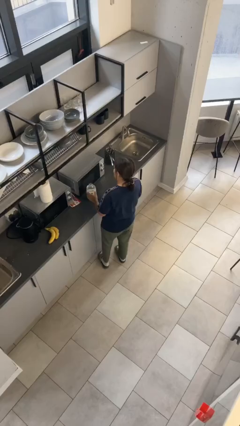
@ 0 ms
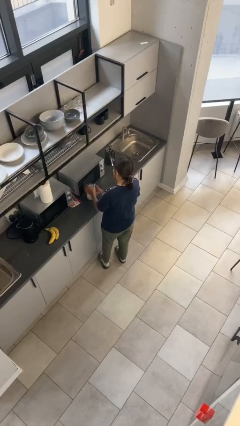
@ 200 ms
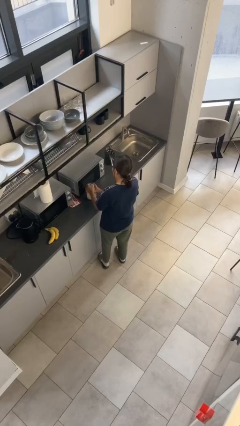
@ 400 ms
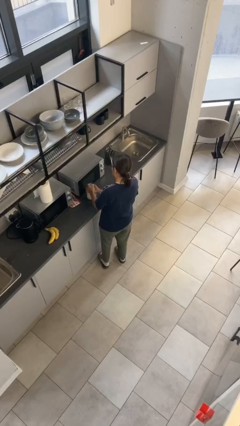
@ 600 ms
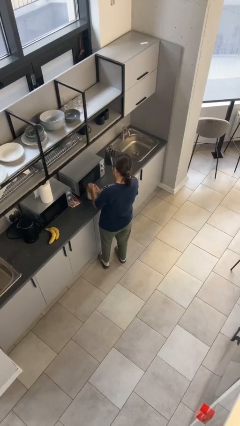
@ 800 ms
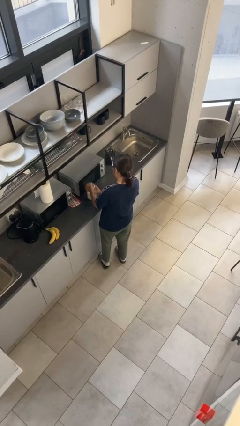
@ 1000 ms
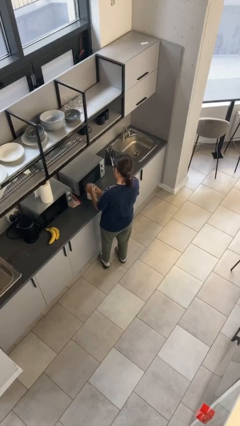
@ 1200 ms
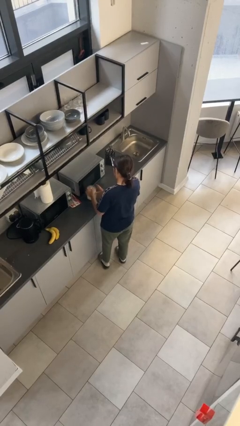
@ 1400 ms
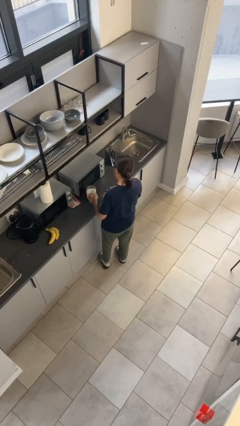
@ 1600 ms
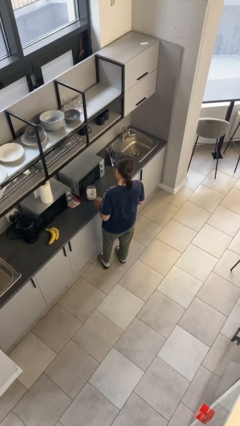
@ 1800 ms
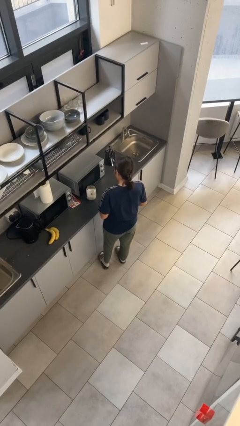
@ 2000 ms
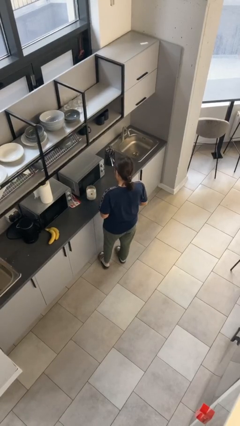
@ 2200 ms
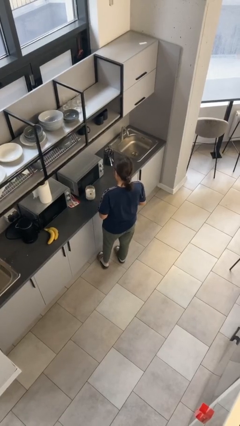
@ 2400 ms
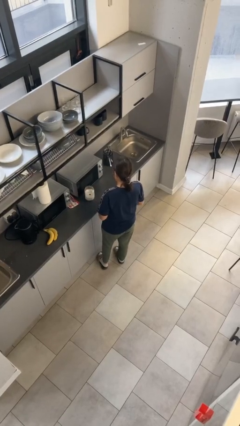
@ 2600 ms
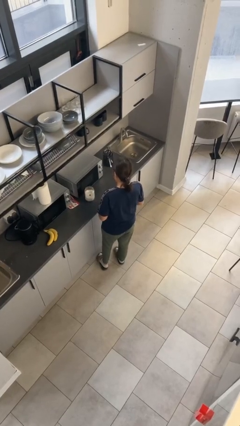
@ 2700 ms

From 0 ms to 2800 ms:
person opens jar

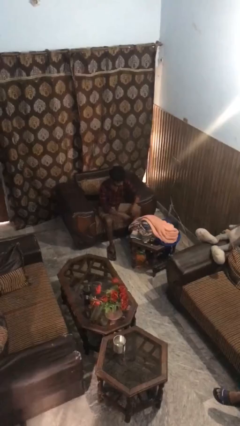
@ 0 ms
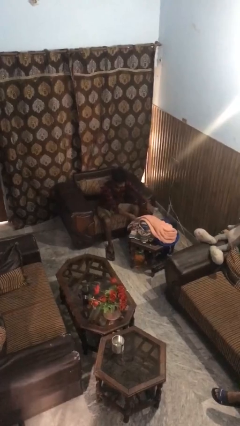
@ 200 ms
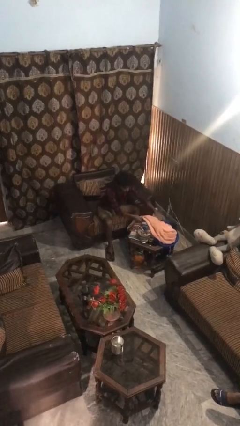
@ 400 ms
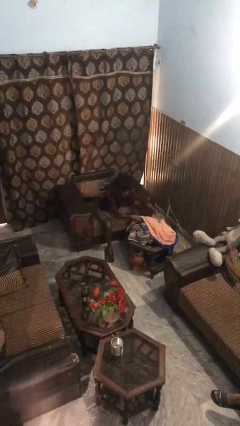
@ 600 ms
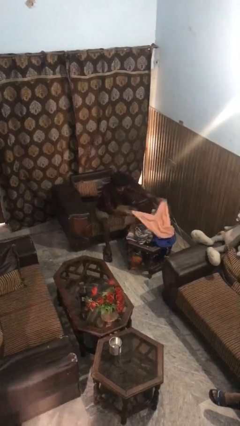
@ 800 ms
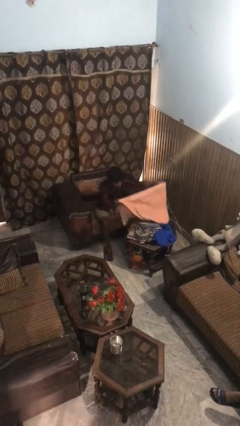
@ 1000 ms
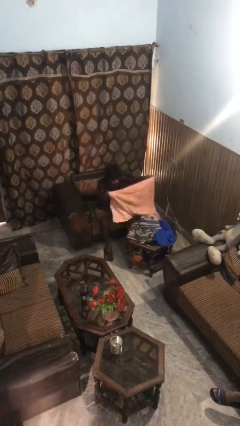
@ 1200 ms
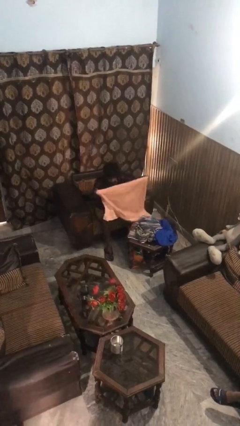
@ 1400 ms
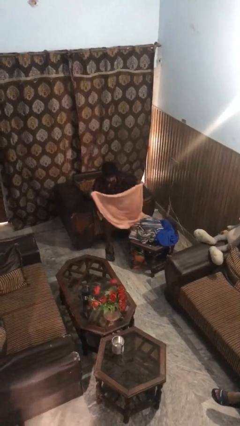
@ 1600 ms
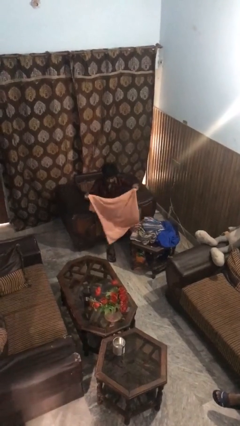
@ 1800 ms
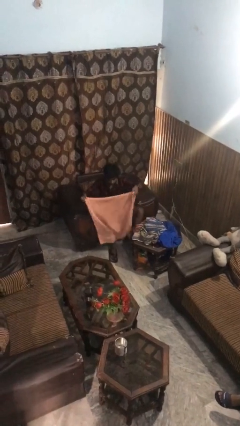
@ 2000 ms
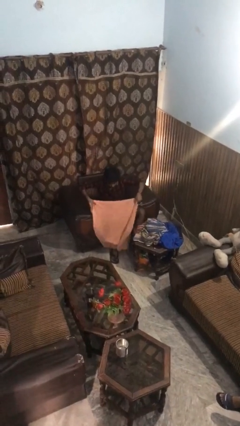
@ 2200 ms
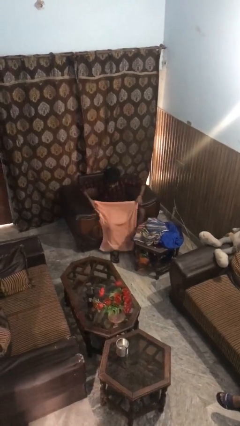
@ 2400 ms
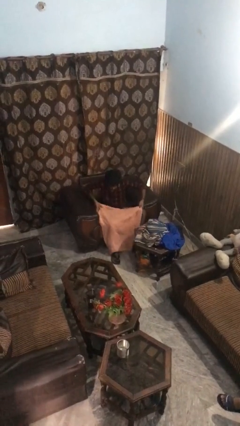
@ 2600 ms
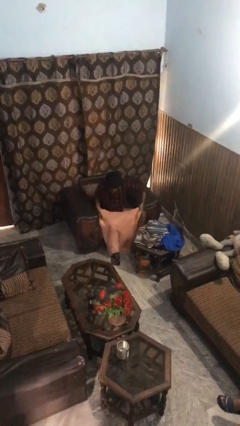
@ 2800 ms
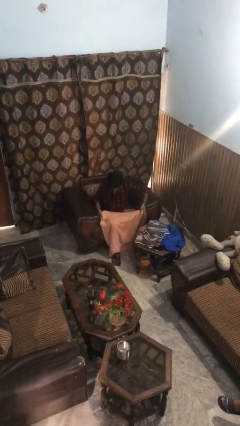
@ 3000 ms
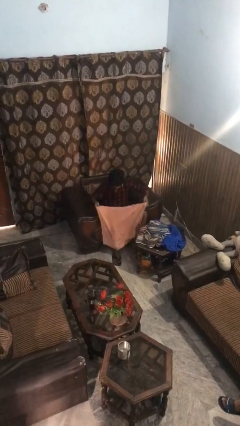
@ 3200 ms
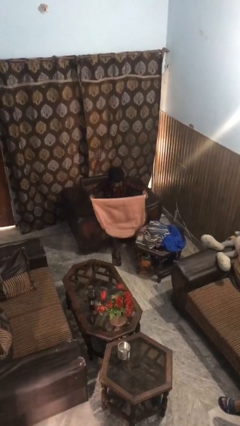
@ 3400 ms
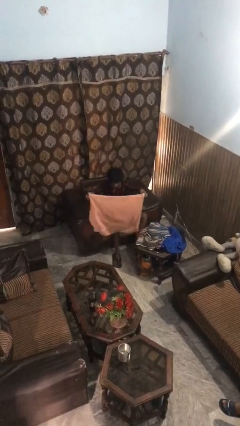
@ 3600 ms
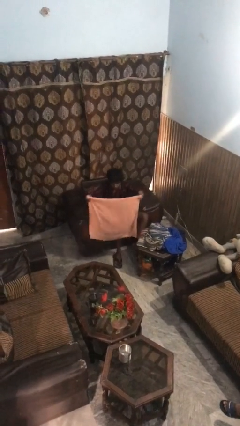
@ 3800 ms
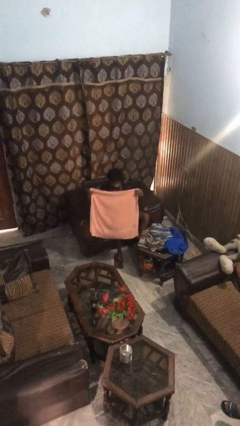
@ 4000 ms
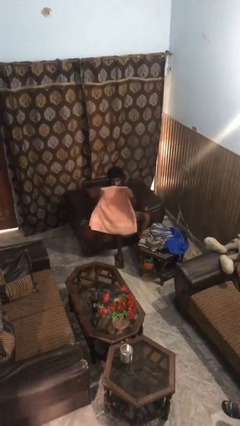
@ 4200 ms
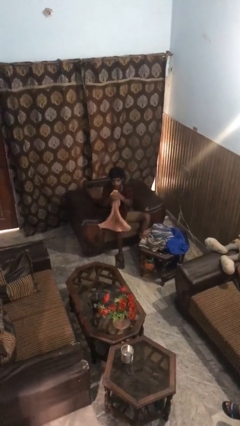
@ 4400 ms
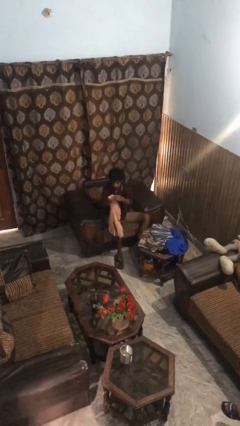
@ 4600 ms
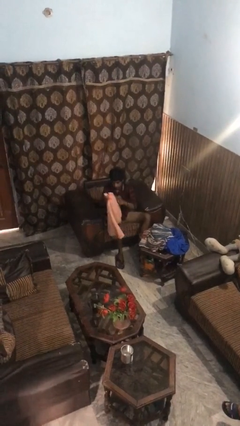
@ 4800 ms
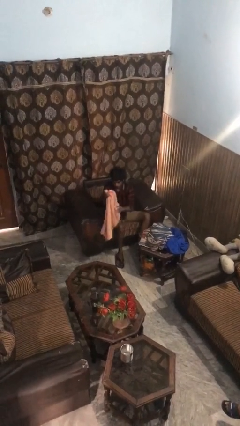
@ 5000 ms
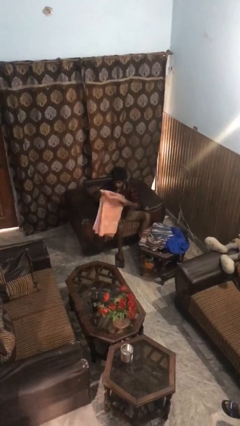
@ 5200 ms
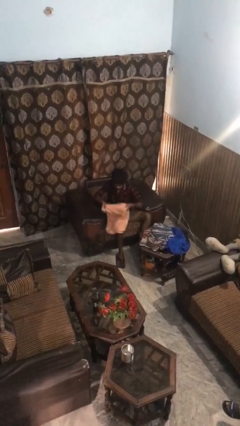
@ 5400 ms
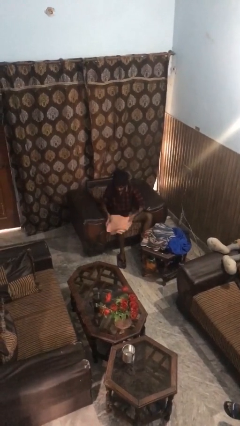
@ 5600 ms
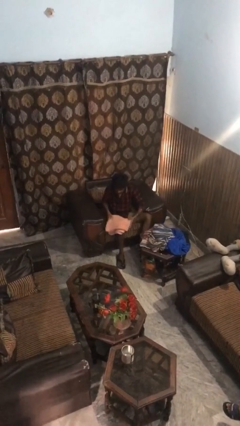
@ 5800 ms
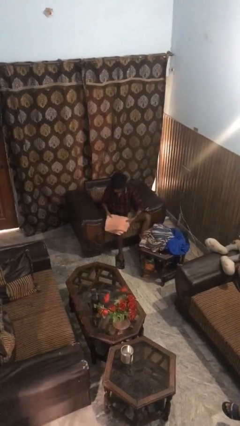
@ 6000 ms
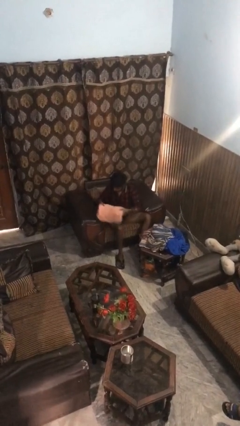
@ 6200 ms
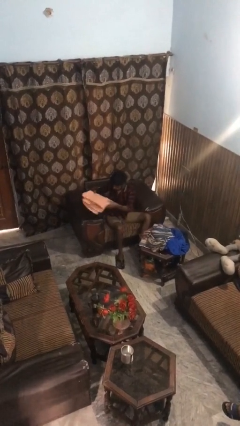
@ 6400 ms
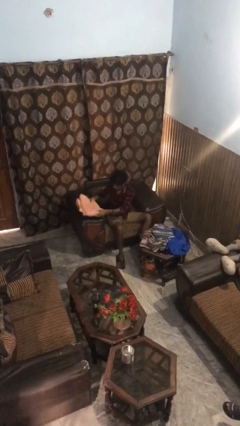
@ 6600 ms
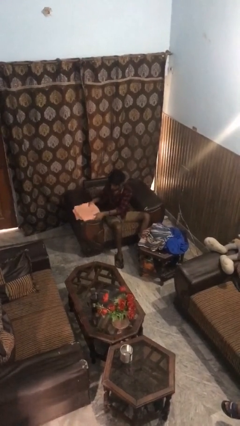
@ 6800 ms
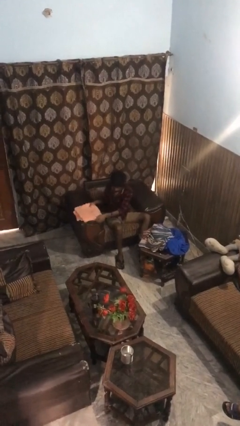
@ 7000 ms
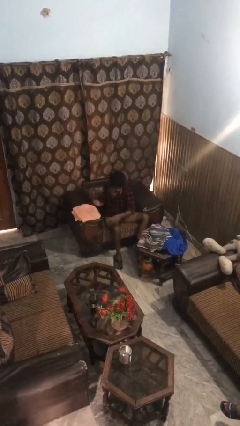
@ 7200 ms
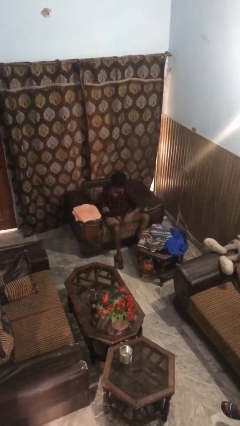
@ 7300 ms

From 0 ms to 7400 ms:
person folds towel

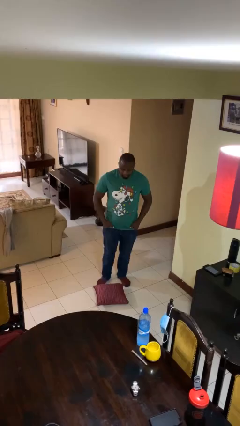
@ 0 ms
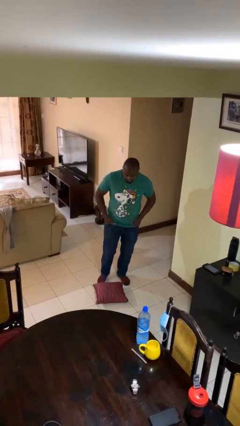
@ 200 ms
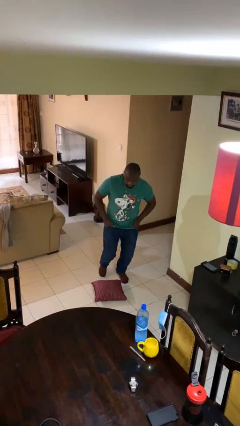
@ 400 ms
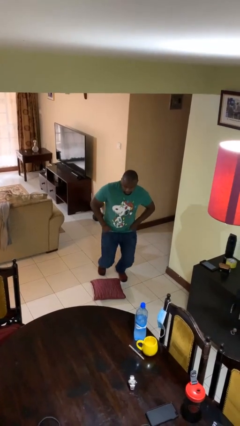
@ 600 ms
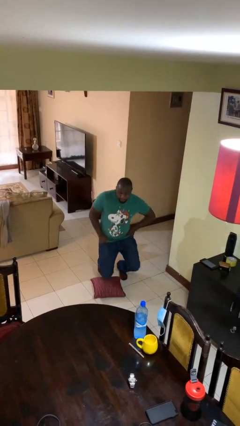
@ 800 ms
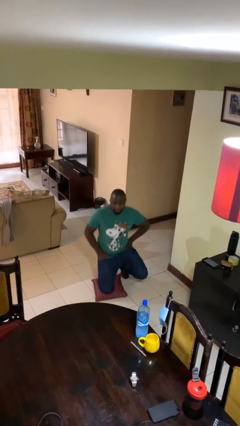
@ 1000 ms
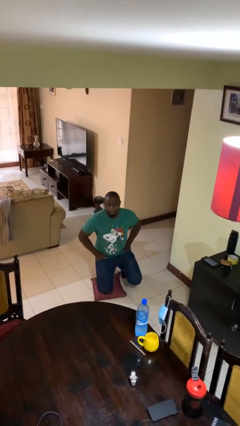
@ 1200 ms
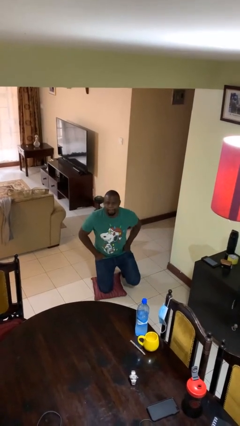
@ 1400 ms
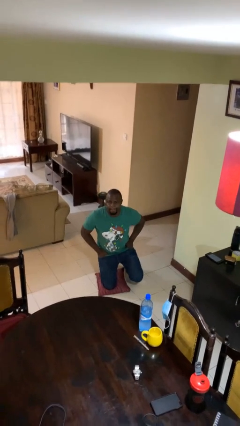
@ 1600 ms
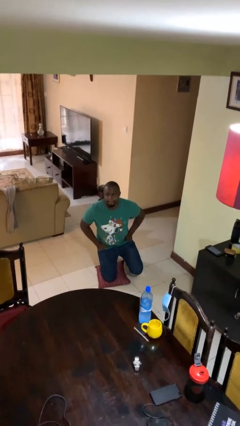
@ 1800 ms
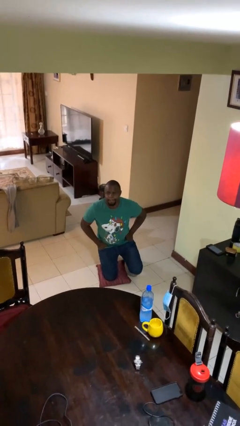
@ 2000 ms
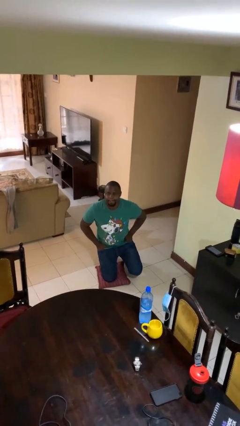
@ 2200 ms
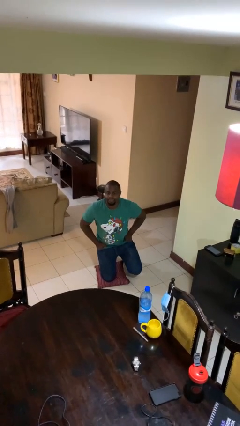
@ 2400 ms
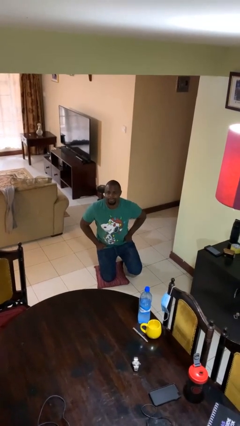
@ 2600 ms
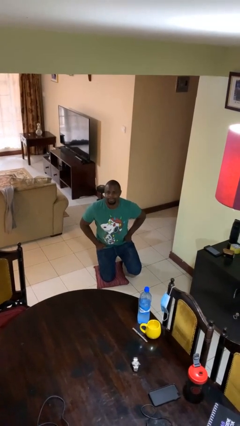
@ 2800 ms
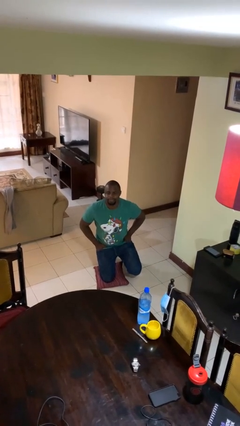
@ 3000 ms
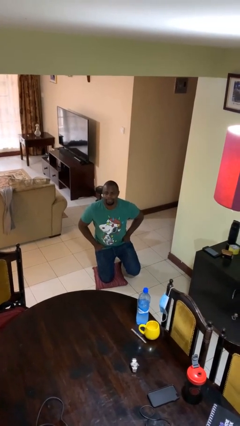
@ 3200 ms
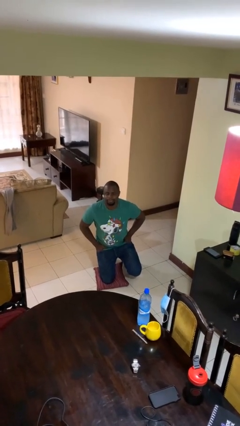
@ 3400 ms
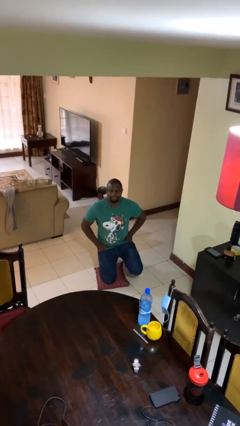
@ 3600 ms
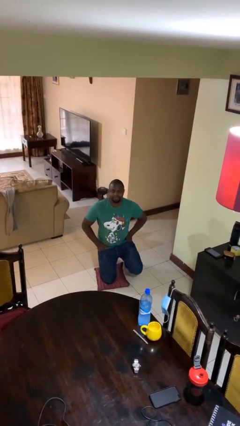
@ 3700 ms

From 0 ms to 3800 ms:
person kneels

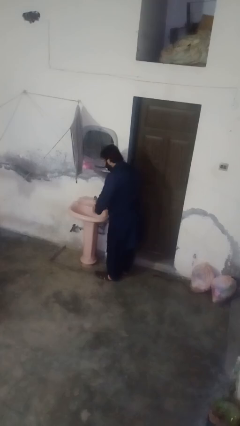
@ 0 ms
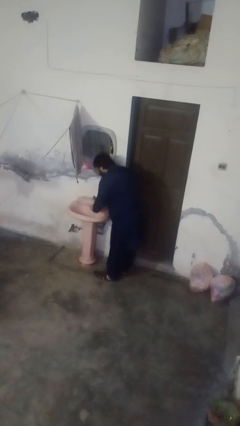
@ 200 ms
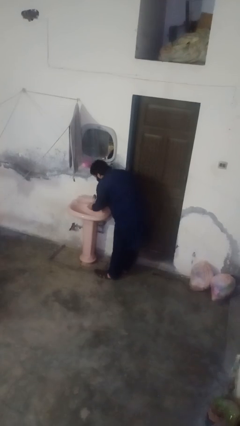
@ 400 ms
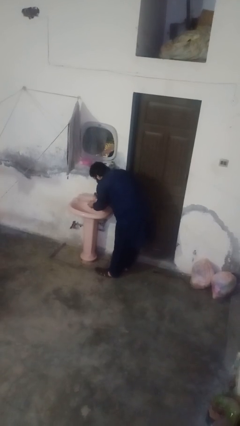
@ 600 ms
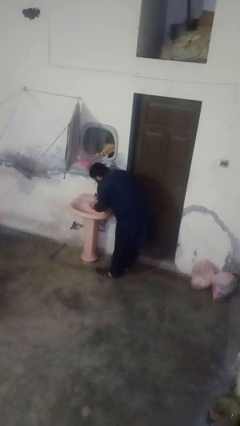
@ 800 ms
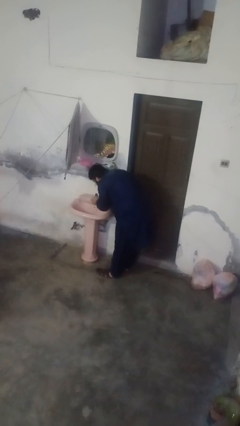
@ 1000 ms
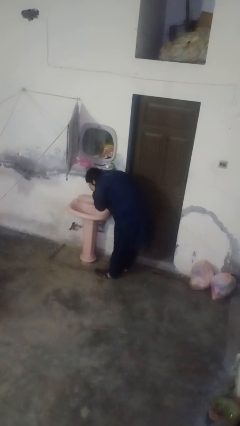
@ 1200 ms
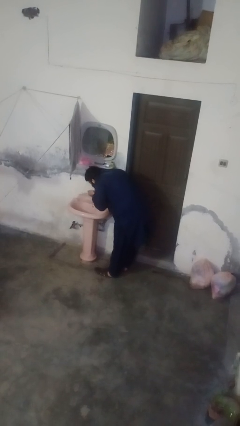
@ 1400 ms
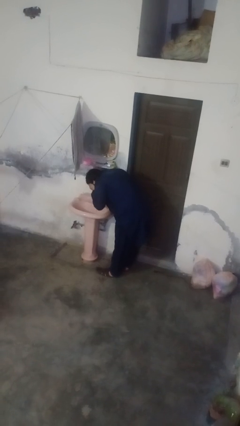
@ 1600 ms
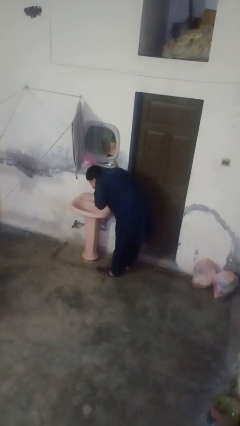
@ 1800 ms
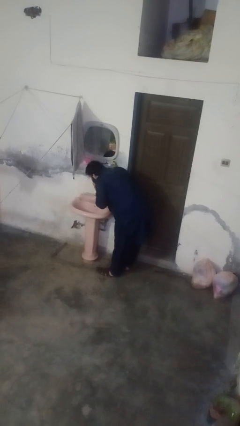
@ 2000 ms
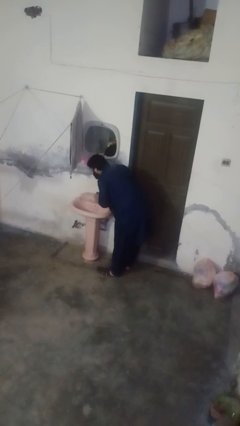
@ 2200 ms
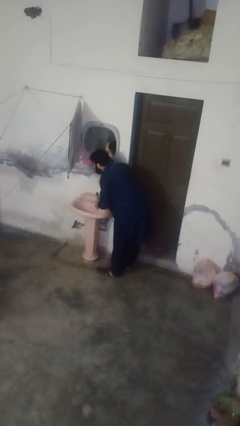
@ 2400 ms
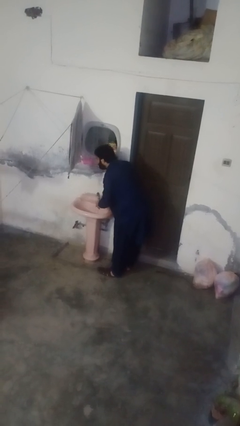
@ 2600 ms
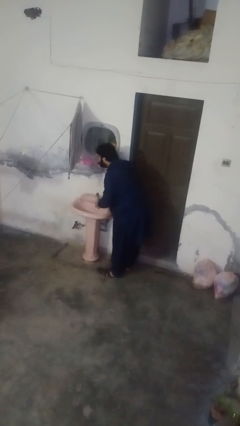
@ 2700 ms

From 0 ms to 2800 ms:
person washes face

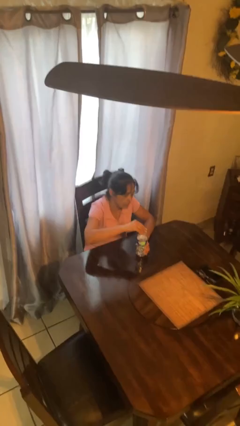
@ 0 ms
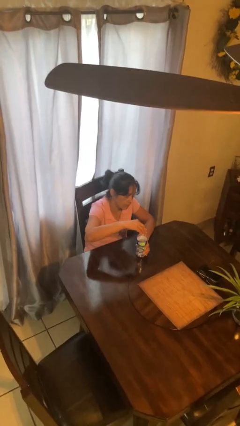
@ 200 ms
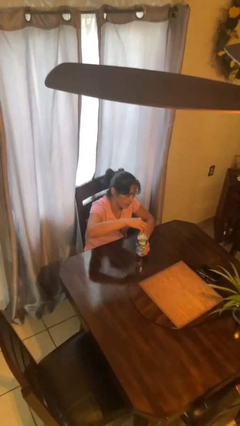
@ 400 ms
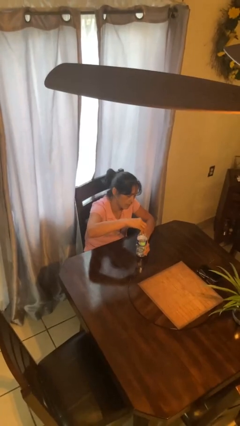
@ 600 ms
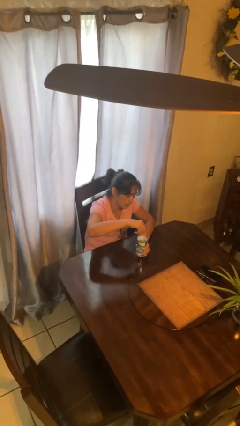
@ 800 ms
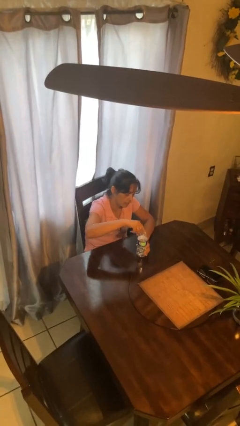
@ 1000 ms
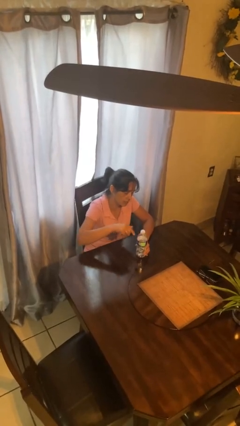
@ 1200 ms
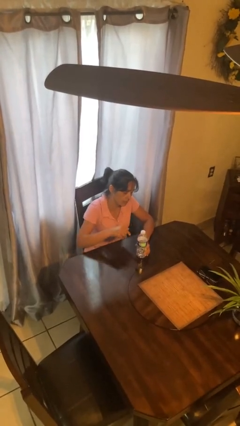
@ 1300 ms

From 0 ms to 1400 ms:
person screws lid to bottle
